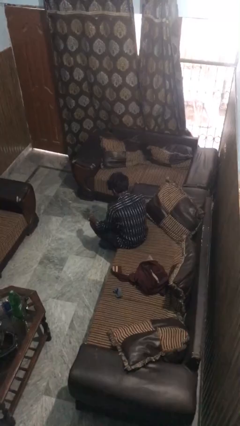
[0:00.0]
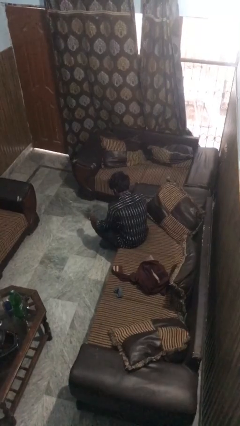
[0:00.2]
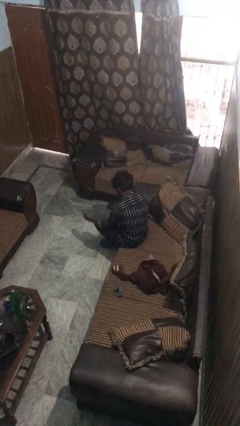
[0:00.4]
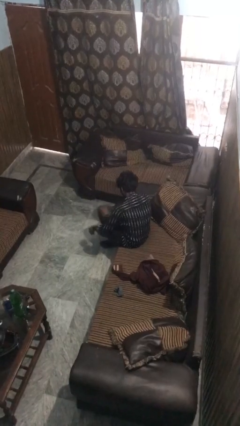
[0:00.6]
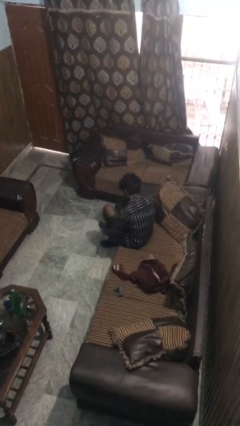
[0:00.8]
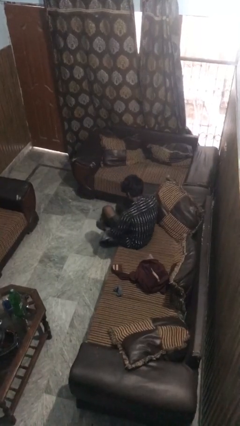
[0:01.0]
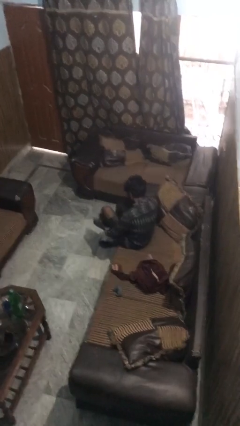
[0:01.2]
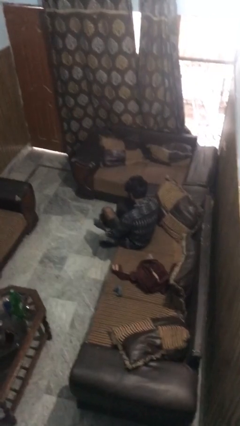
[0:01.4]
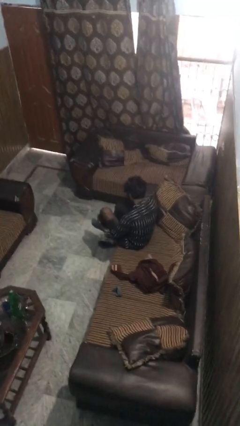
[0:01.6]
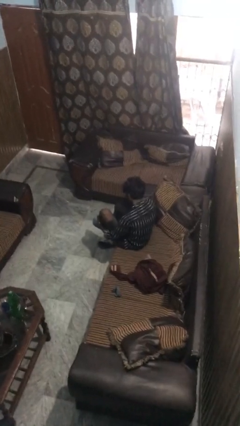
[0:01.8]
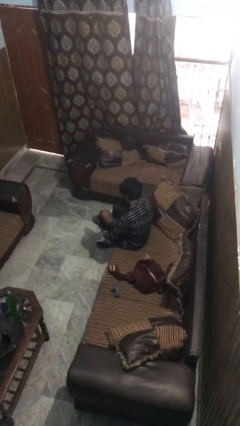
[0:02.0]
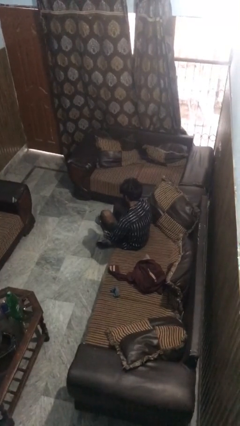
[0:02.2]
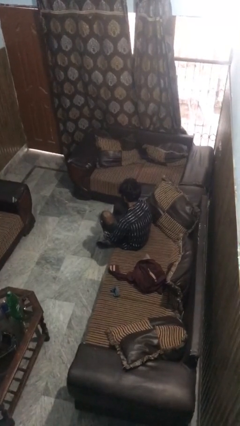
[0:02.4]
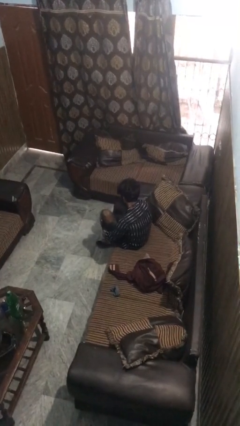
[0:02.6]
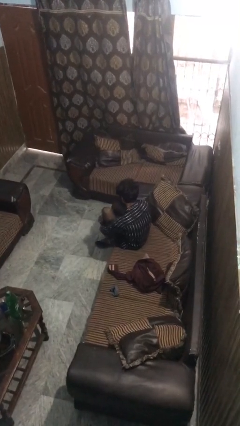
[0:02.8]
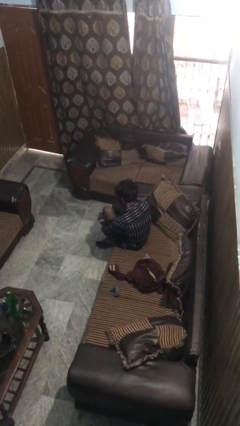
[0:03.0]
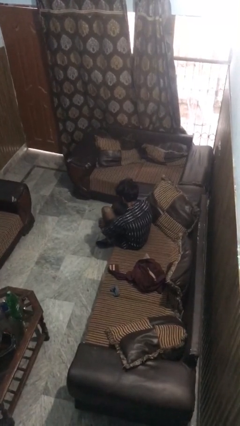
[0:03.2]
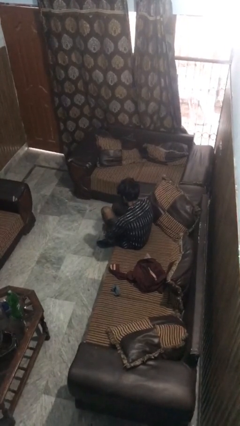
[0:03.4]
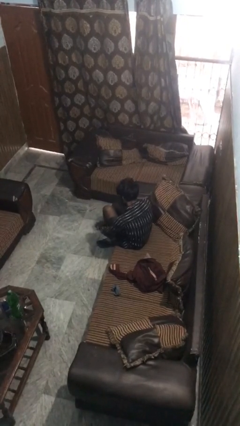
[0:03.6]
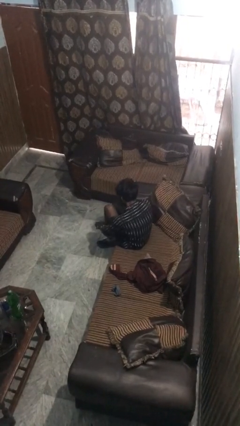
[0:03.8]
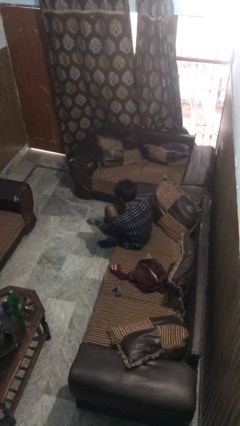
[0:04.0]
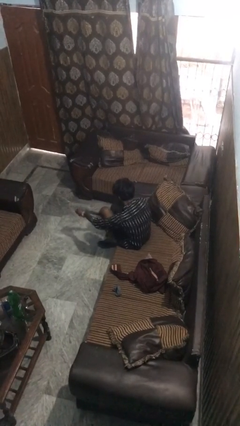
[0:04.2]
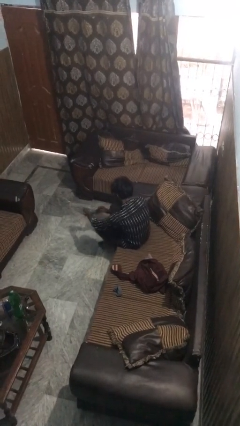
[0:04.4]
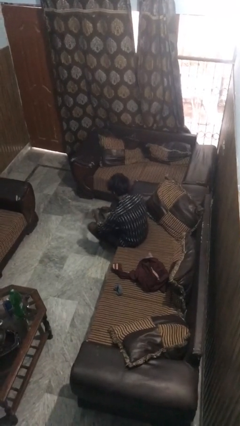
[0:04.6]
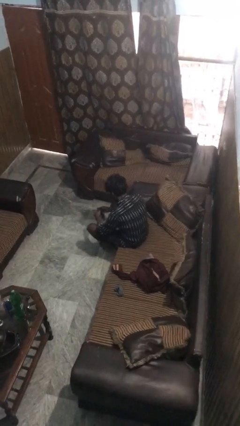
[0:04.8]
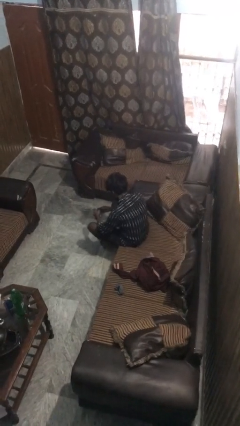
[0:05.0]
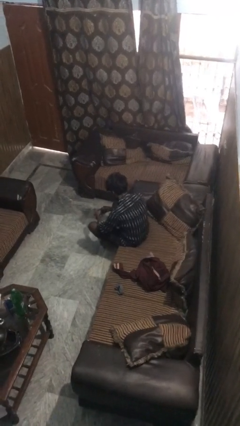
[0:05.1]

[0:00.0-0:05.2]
person takes off socks

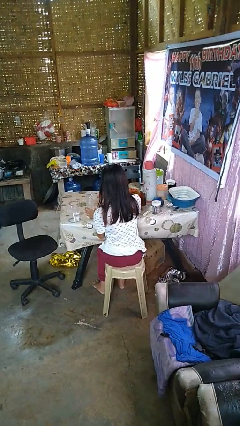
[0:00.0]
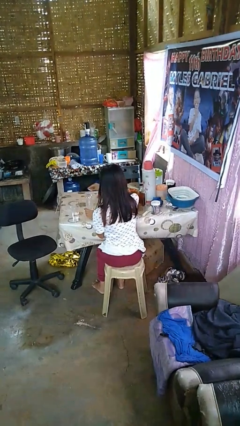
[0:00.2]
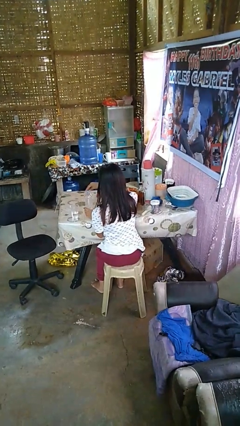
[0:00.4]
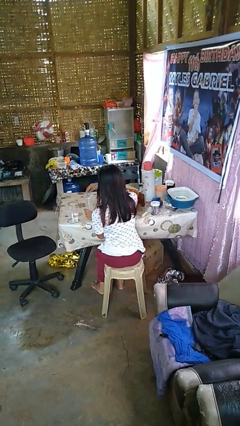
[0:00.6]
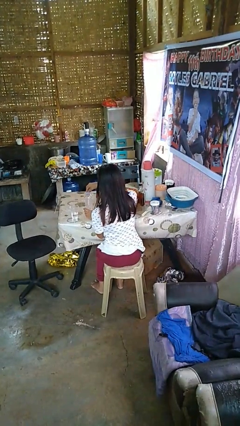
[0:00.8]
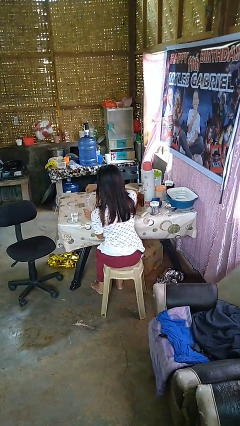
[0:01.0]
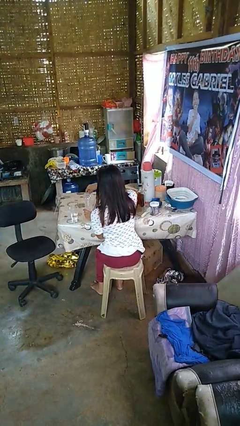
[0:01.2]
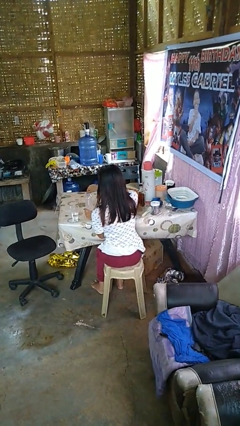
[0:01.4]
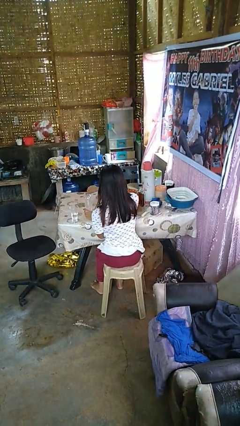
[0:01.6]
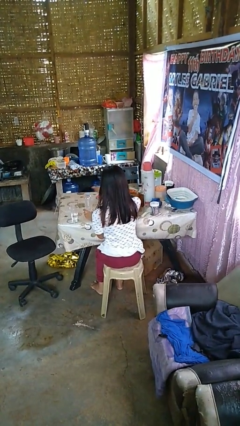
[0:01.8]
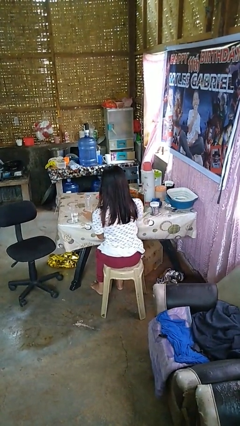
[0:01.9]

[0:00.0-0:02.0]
person screws lid to bottle

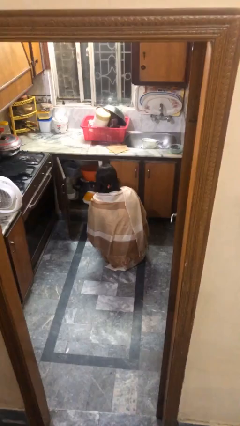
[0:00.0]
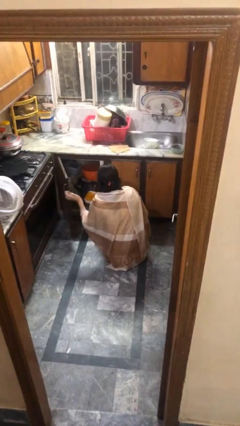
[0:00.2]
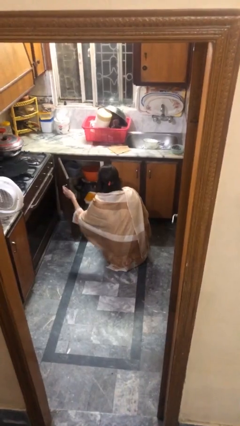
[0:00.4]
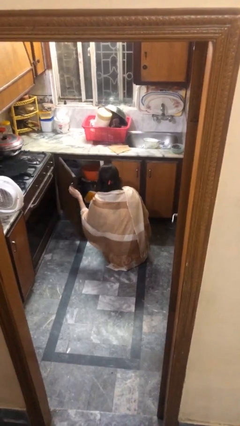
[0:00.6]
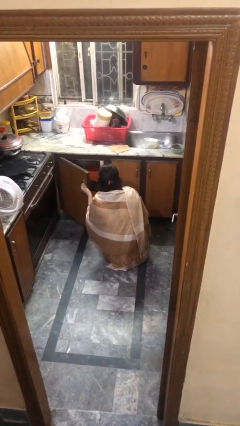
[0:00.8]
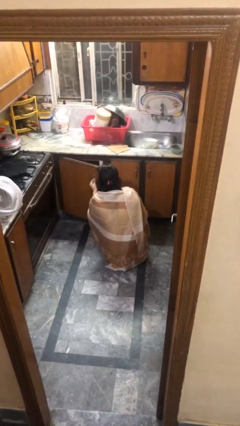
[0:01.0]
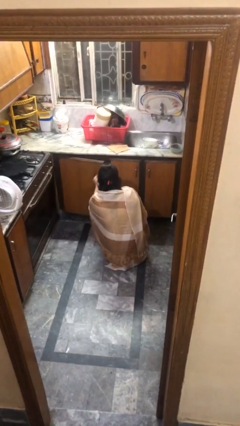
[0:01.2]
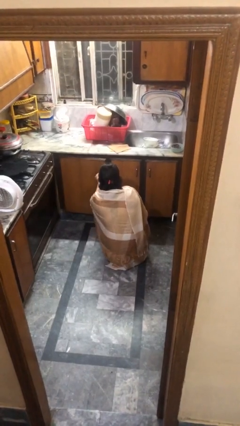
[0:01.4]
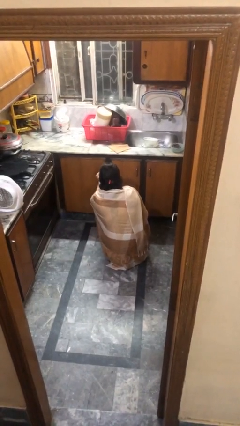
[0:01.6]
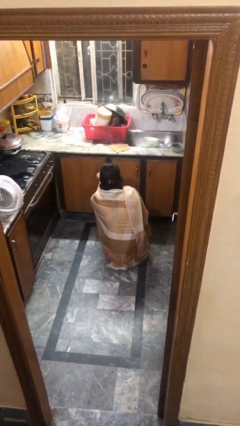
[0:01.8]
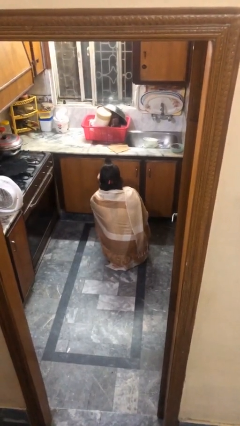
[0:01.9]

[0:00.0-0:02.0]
person closes kitchen drawer

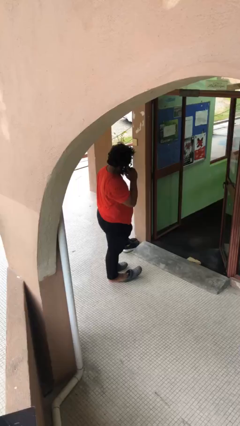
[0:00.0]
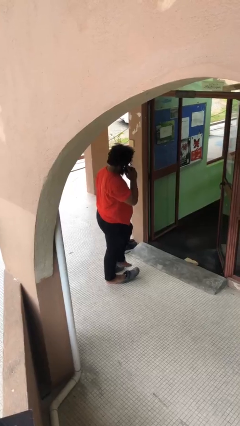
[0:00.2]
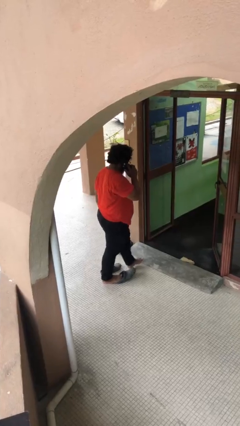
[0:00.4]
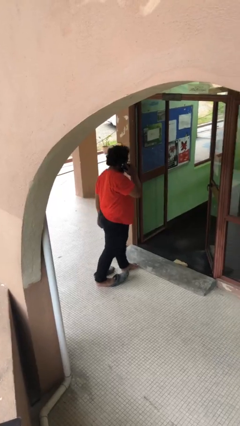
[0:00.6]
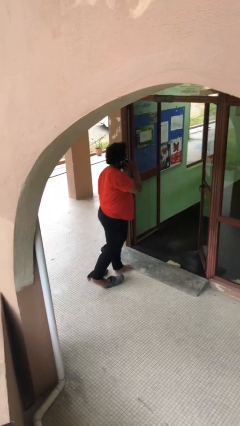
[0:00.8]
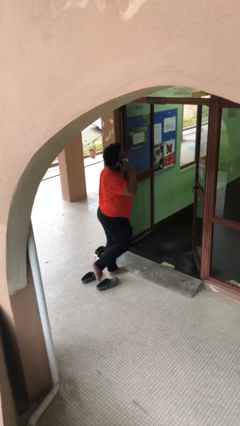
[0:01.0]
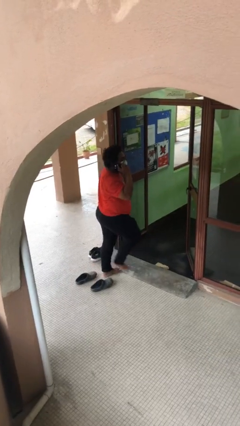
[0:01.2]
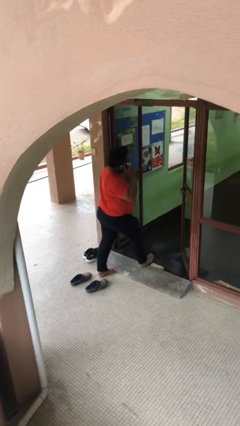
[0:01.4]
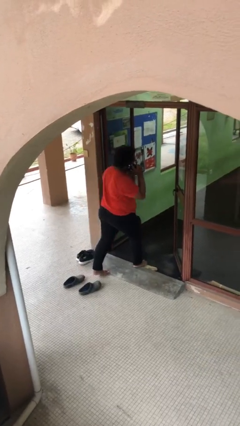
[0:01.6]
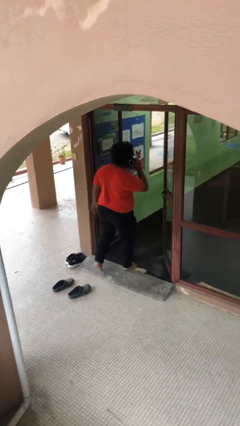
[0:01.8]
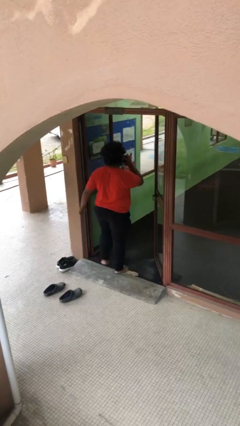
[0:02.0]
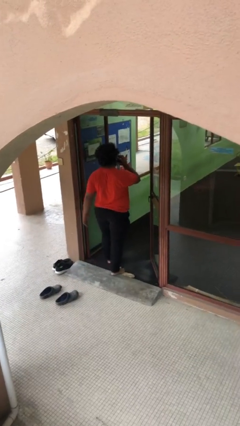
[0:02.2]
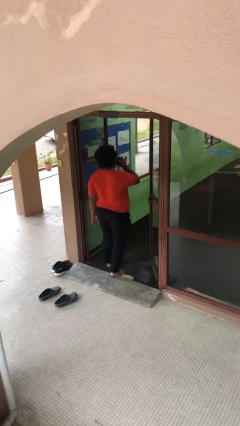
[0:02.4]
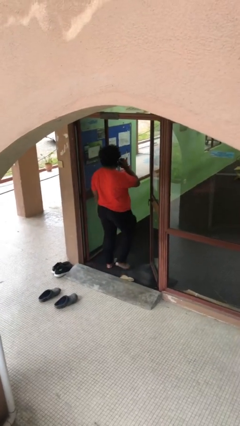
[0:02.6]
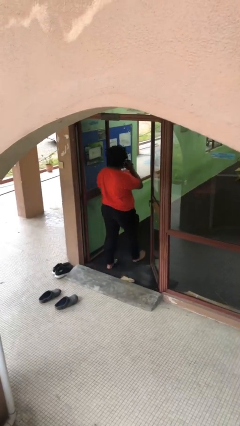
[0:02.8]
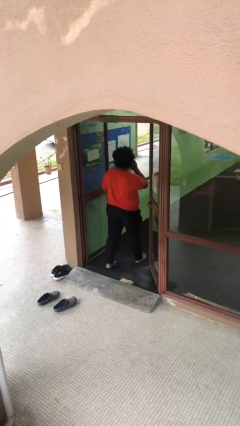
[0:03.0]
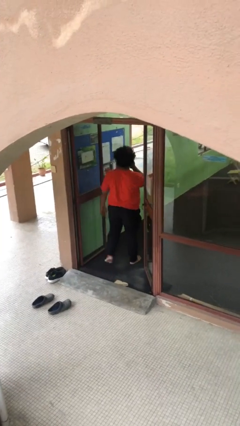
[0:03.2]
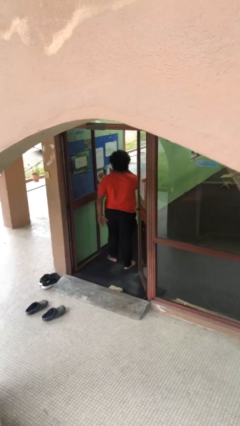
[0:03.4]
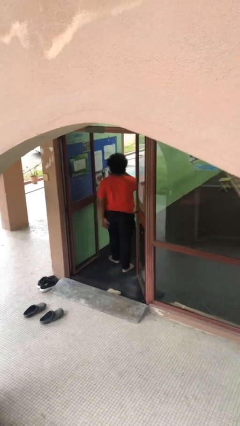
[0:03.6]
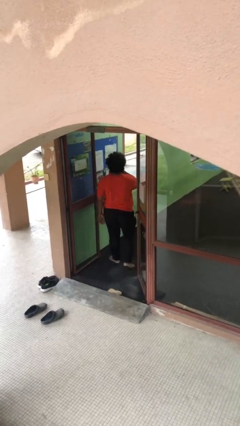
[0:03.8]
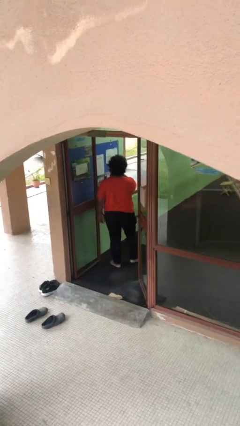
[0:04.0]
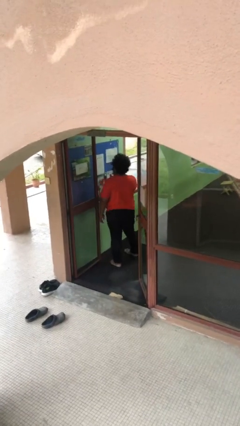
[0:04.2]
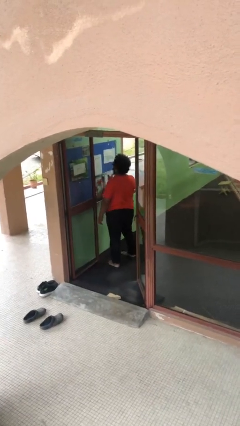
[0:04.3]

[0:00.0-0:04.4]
person exits scene through structure

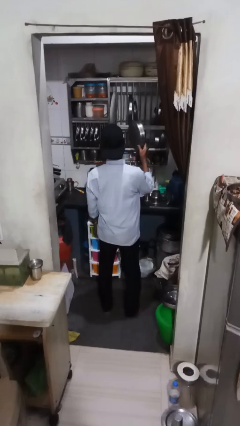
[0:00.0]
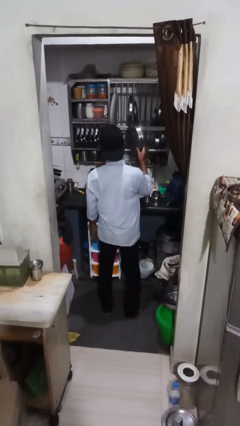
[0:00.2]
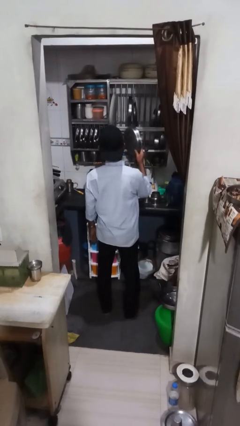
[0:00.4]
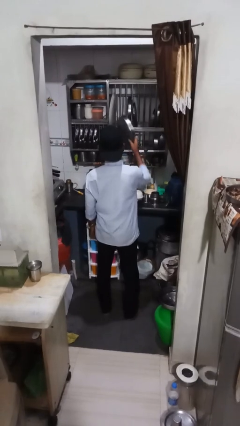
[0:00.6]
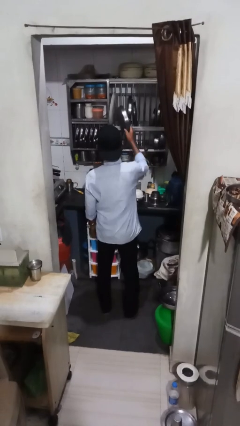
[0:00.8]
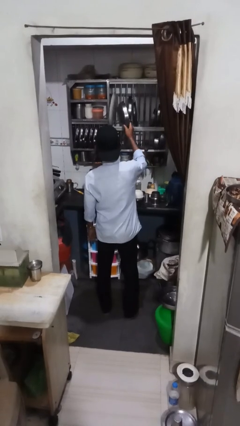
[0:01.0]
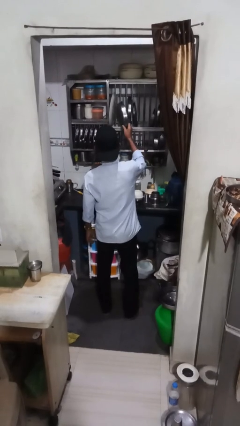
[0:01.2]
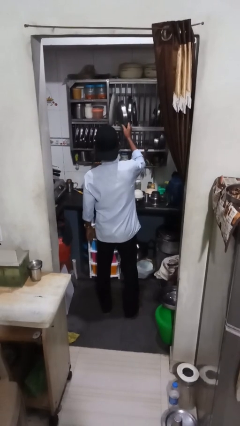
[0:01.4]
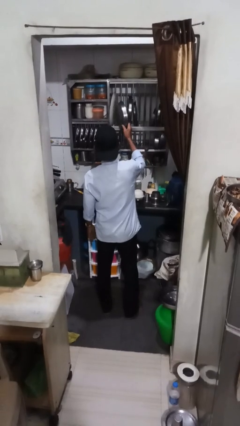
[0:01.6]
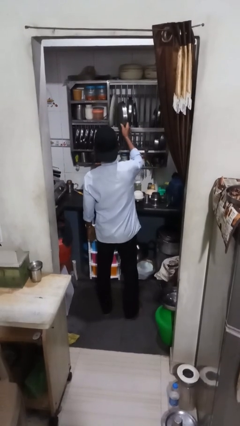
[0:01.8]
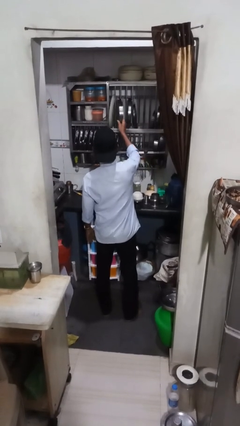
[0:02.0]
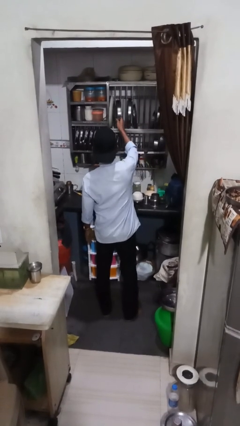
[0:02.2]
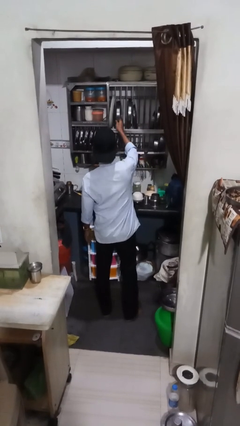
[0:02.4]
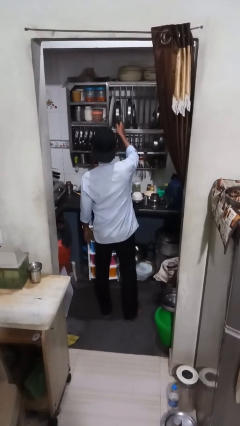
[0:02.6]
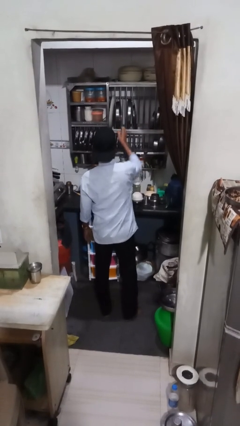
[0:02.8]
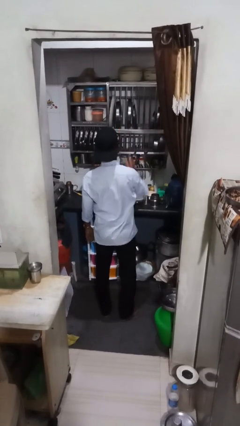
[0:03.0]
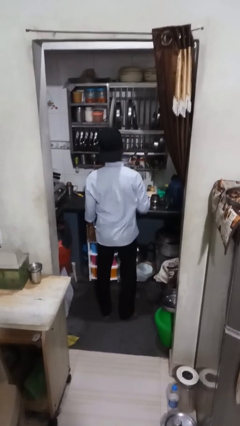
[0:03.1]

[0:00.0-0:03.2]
person puts object in cabinet

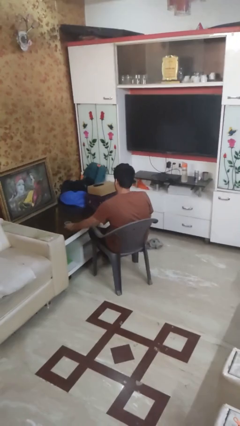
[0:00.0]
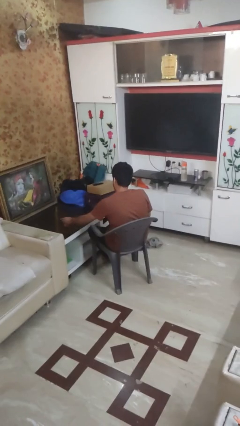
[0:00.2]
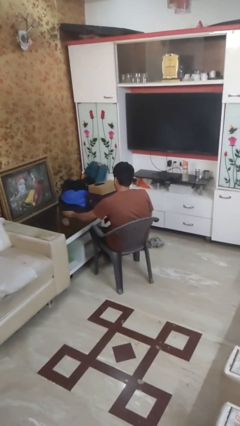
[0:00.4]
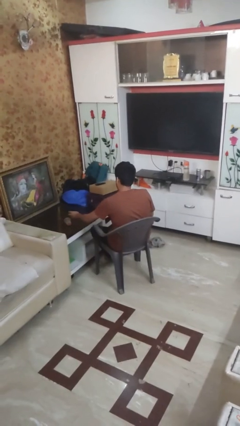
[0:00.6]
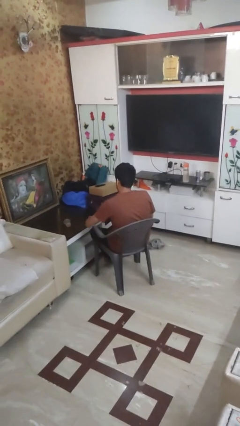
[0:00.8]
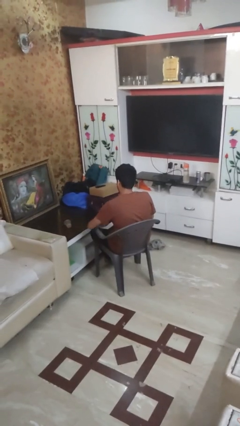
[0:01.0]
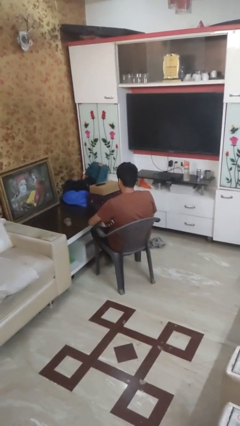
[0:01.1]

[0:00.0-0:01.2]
person spills on table
